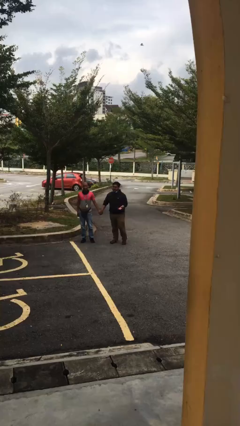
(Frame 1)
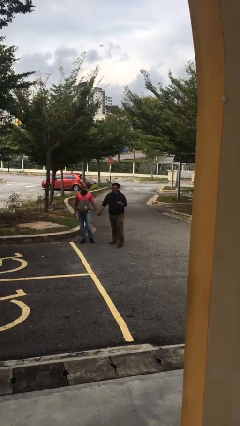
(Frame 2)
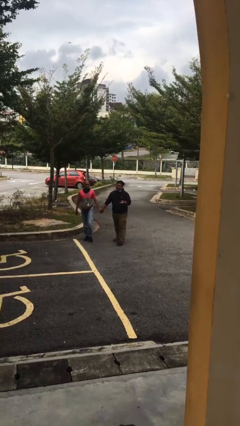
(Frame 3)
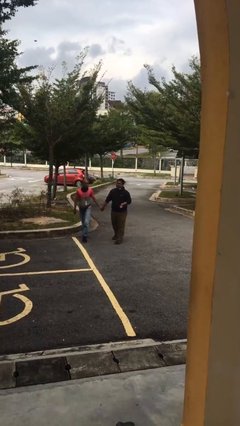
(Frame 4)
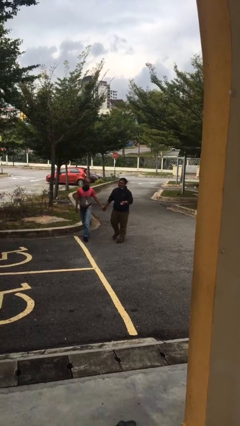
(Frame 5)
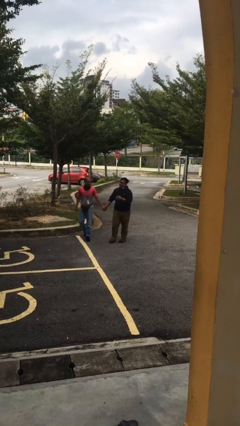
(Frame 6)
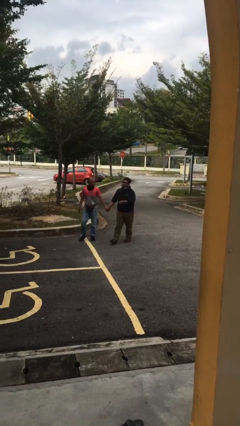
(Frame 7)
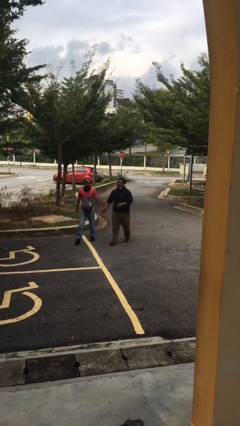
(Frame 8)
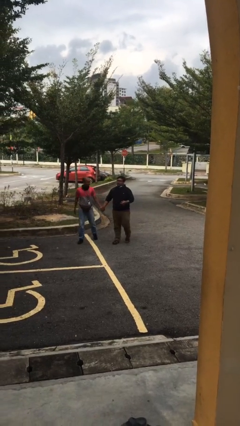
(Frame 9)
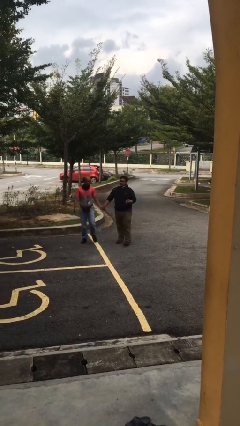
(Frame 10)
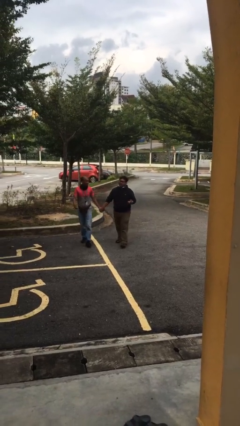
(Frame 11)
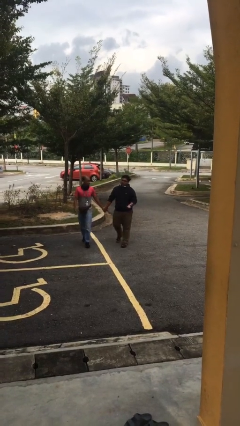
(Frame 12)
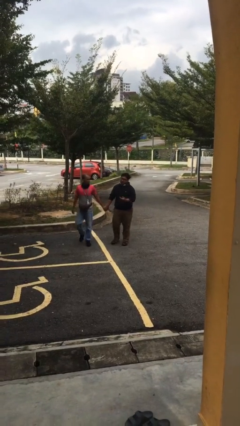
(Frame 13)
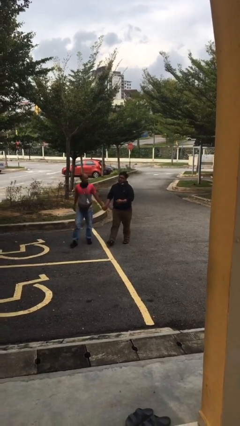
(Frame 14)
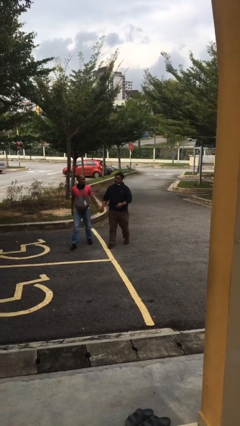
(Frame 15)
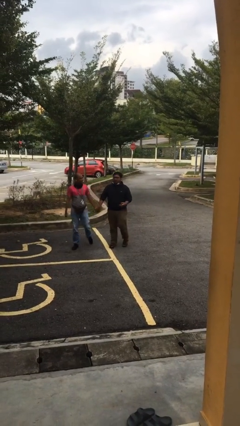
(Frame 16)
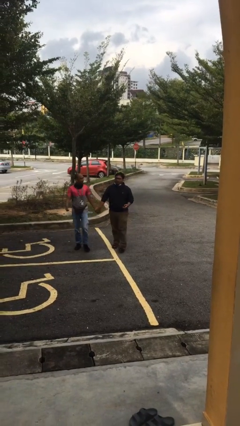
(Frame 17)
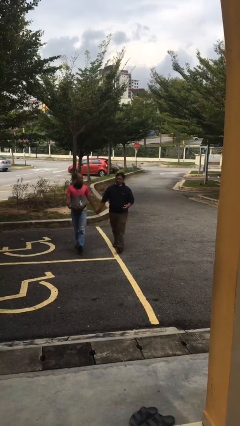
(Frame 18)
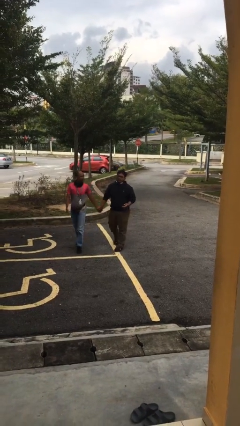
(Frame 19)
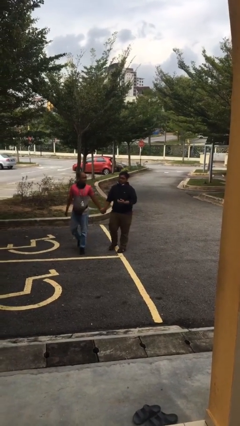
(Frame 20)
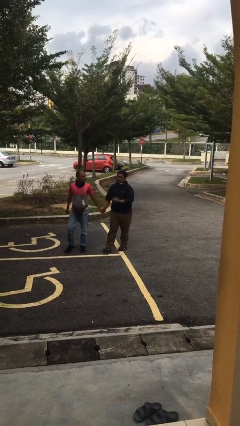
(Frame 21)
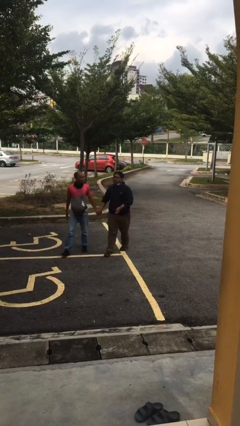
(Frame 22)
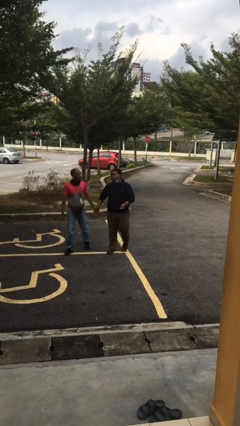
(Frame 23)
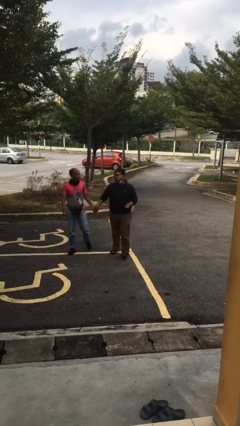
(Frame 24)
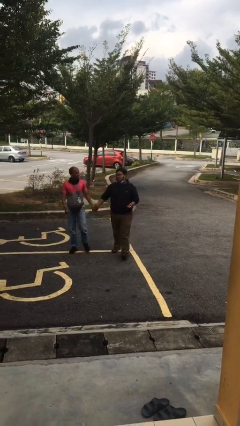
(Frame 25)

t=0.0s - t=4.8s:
person holds hand

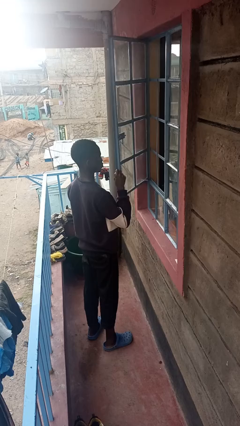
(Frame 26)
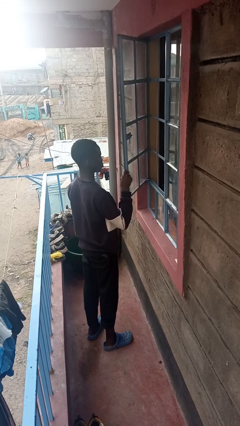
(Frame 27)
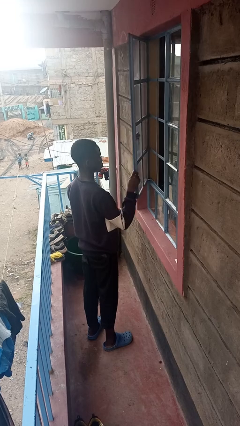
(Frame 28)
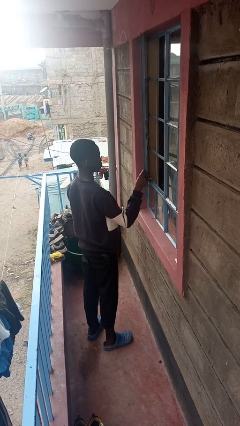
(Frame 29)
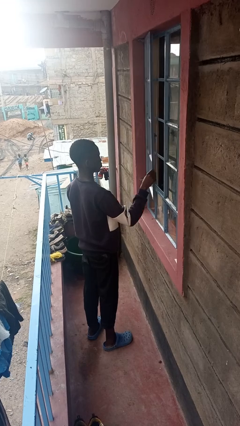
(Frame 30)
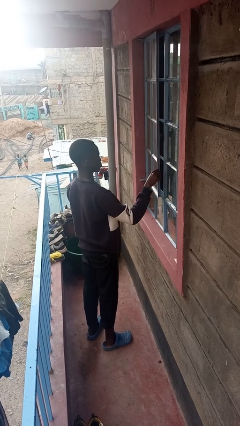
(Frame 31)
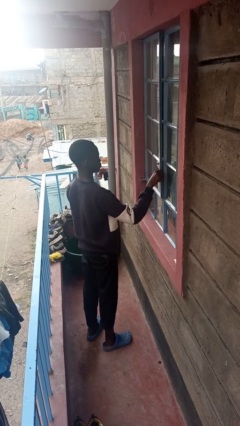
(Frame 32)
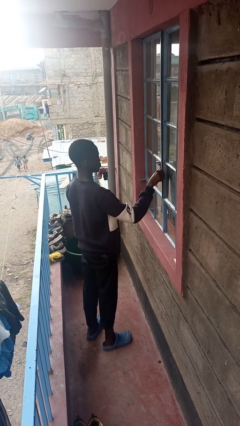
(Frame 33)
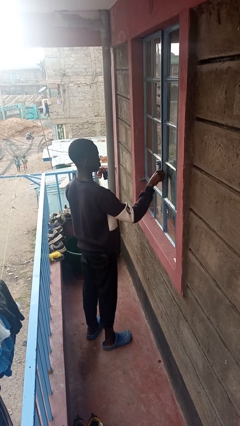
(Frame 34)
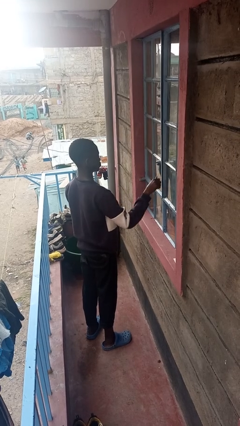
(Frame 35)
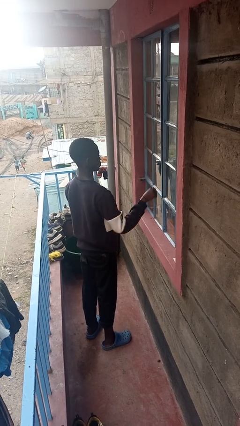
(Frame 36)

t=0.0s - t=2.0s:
person closes home window

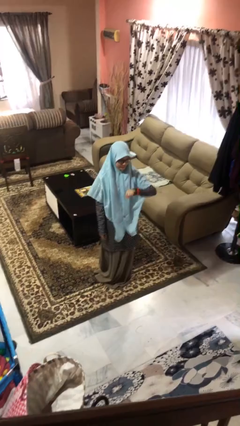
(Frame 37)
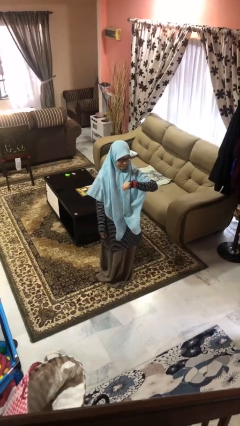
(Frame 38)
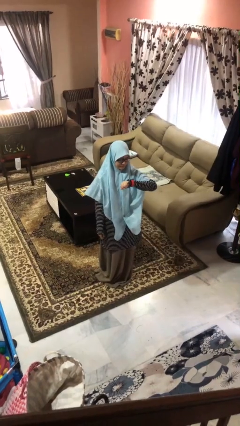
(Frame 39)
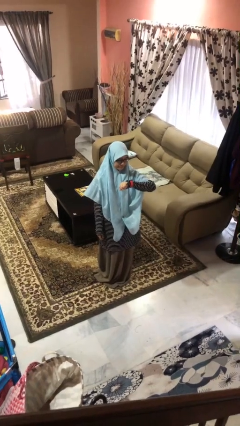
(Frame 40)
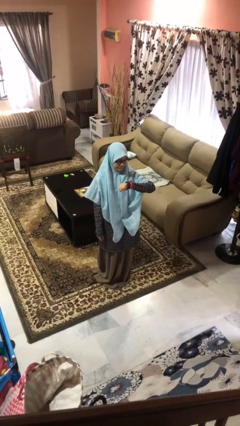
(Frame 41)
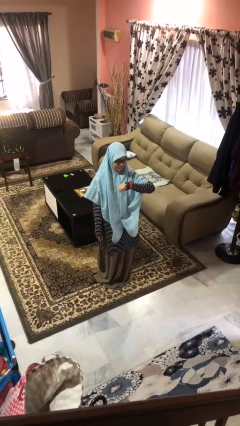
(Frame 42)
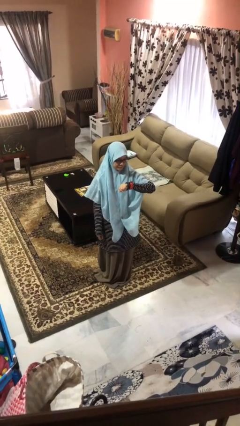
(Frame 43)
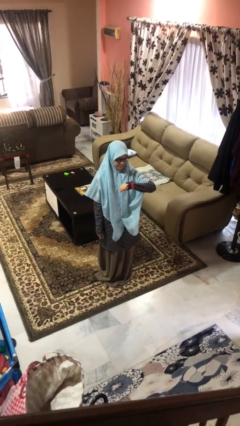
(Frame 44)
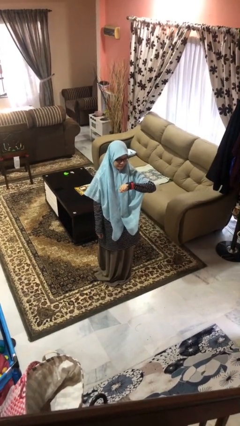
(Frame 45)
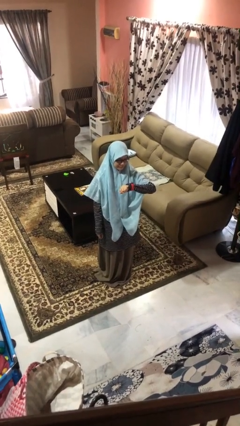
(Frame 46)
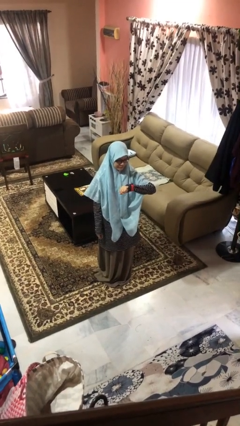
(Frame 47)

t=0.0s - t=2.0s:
person looks at wristwatch

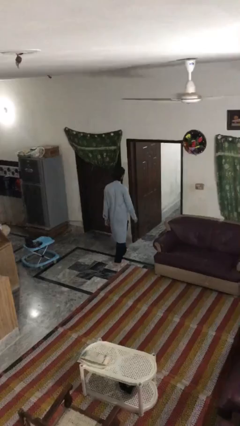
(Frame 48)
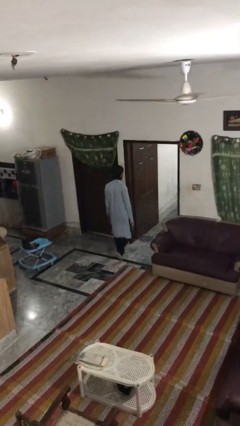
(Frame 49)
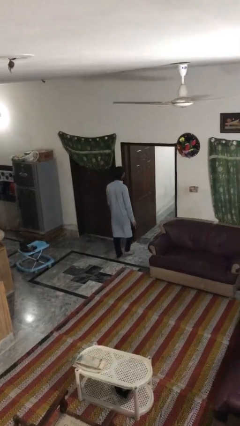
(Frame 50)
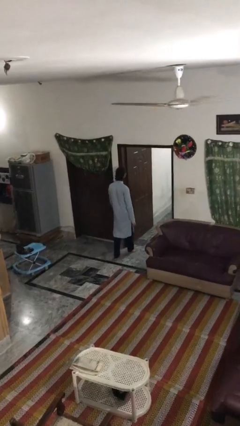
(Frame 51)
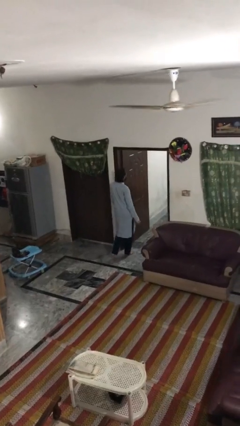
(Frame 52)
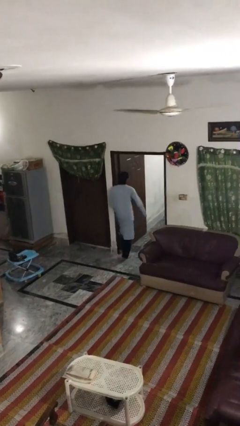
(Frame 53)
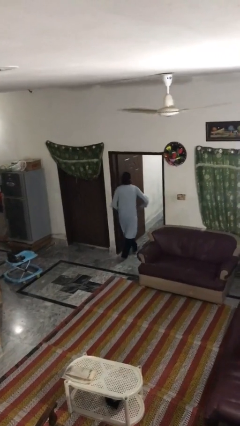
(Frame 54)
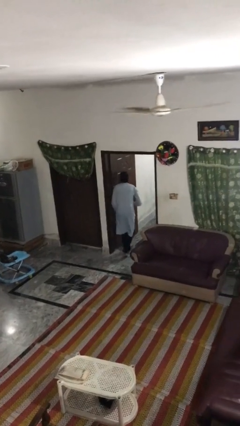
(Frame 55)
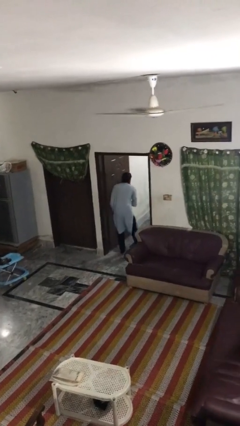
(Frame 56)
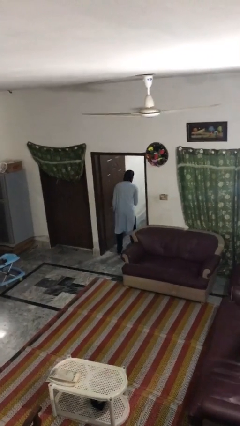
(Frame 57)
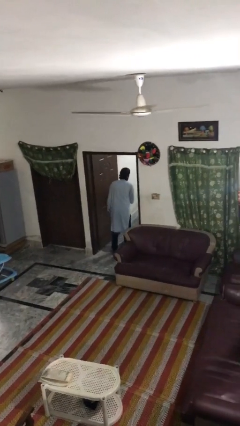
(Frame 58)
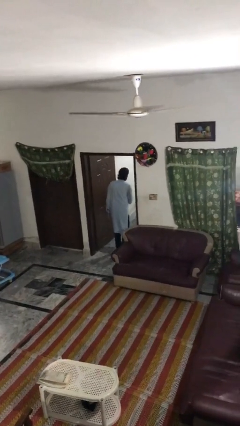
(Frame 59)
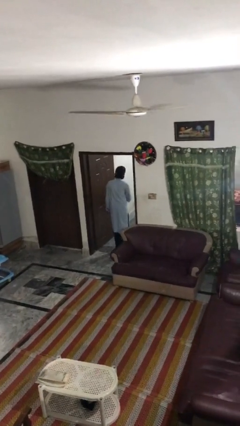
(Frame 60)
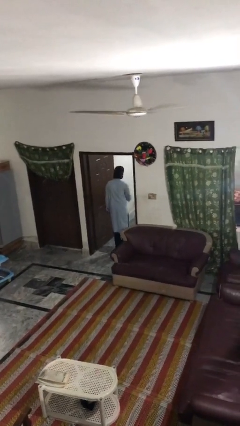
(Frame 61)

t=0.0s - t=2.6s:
person bumps into wall

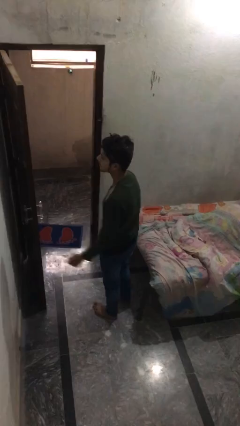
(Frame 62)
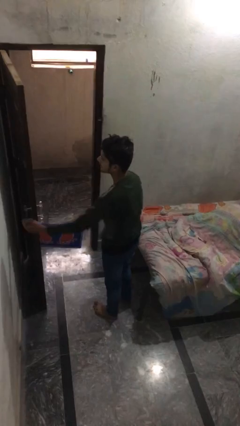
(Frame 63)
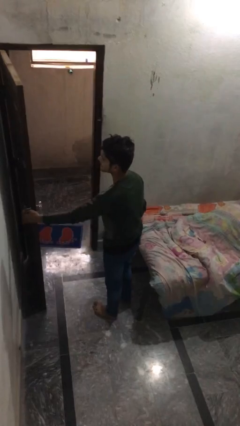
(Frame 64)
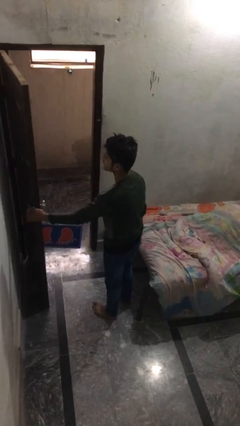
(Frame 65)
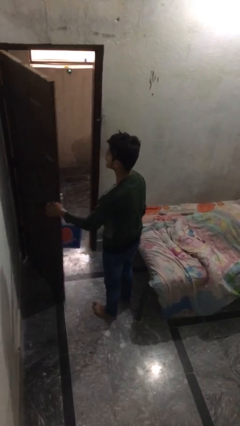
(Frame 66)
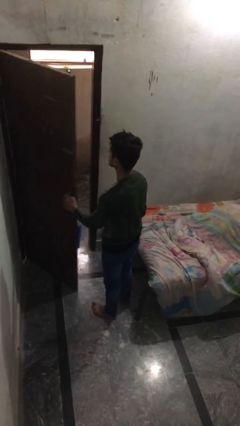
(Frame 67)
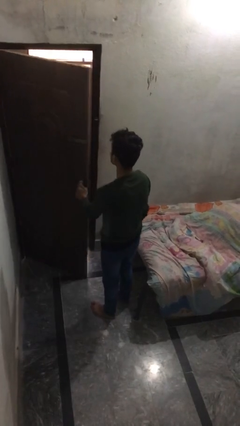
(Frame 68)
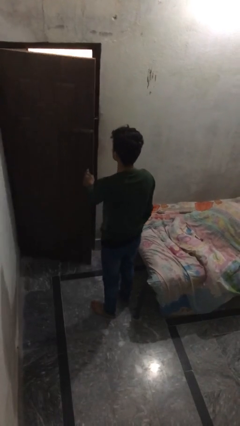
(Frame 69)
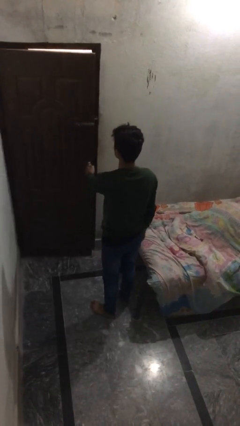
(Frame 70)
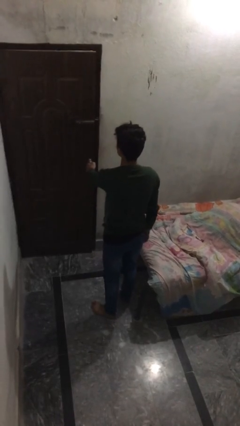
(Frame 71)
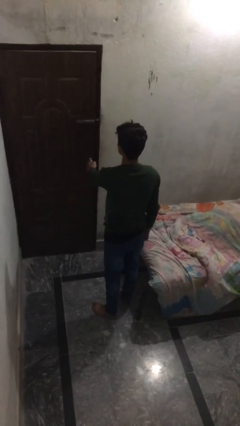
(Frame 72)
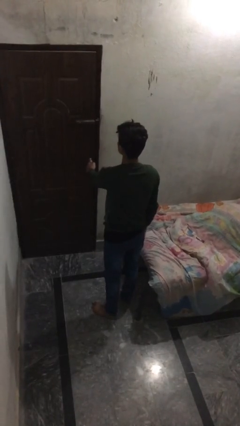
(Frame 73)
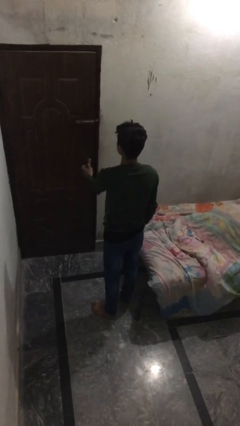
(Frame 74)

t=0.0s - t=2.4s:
person closes facility door

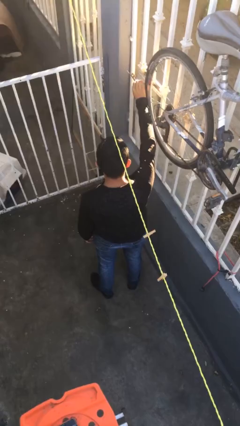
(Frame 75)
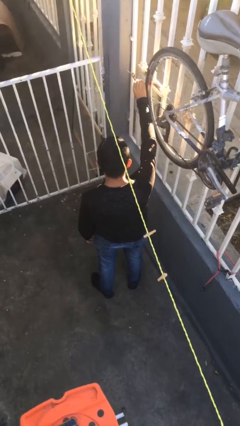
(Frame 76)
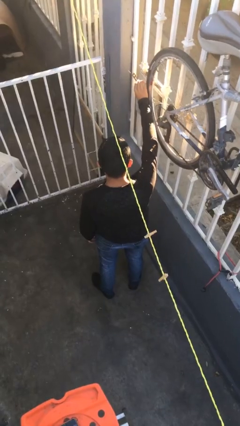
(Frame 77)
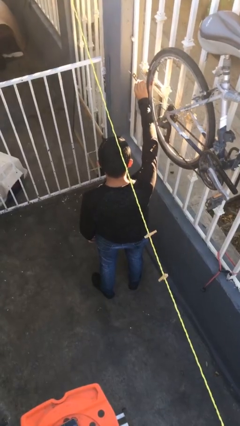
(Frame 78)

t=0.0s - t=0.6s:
person opens mailbox

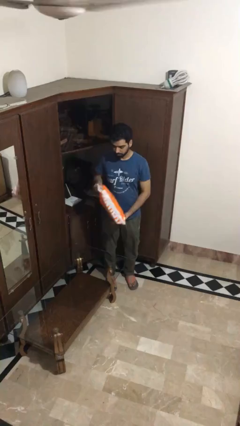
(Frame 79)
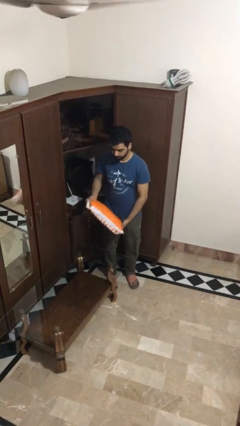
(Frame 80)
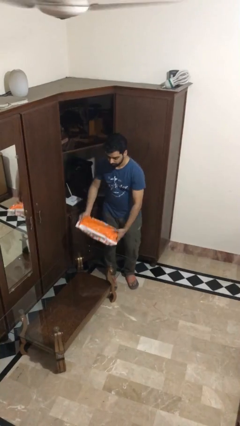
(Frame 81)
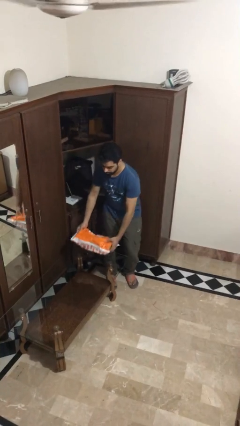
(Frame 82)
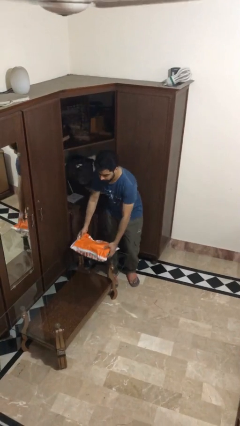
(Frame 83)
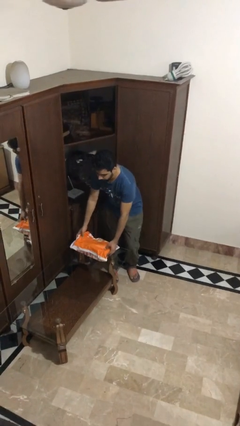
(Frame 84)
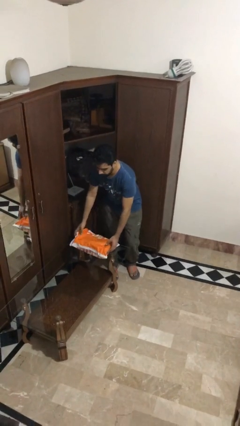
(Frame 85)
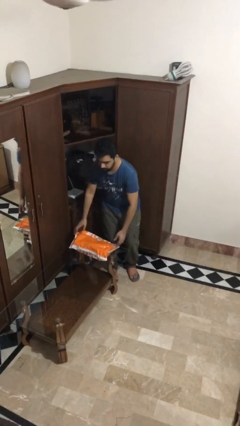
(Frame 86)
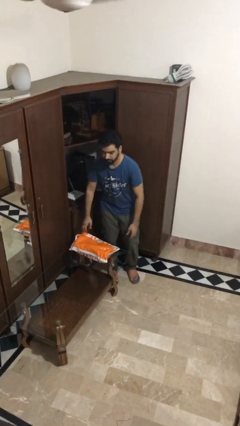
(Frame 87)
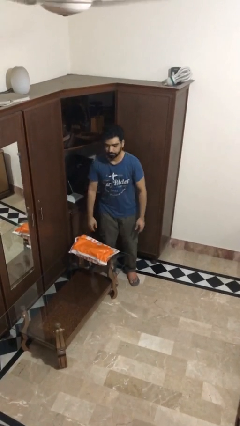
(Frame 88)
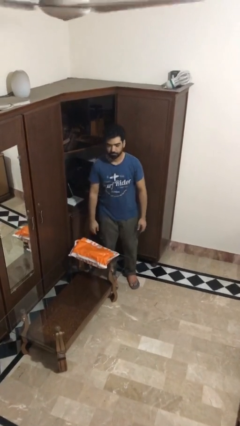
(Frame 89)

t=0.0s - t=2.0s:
person puts down object on table

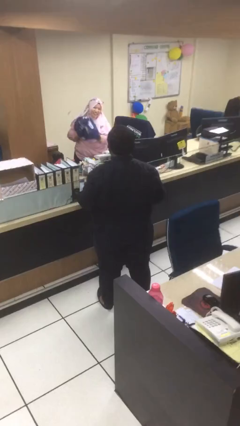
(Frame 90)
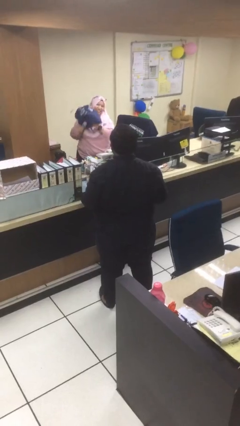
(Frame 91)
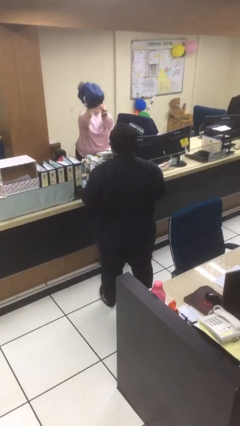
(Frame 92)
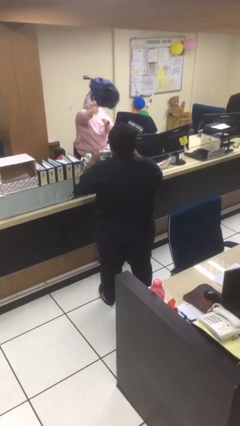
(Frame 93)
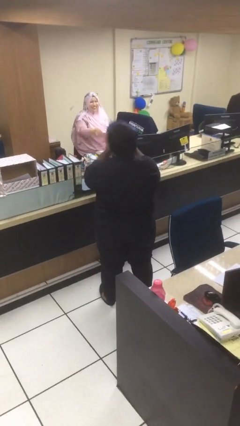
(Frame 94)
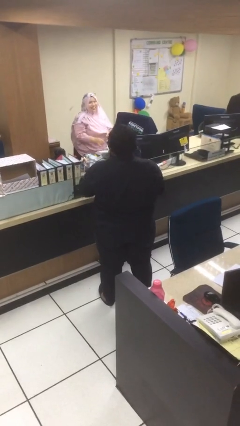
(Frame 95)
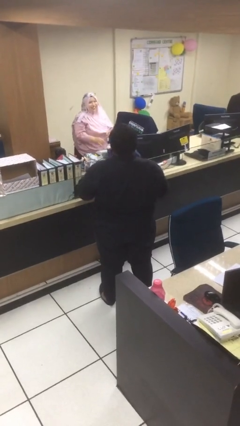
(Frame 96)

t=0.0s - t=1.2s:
person catches object from person
